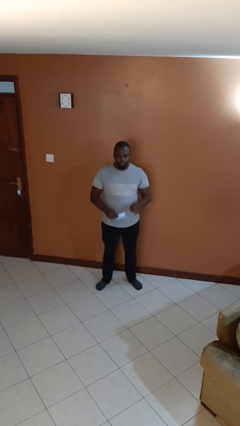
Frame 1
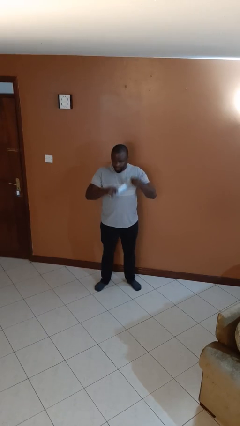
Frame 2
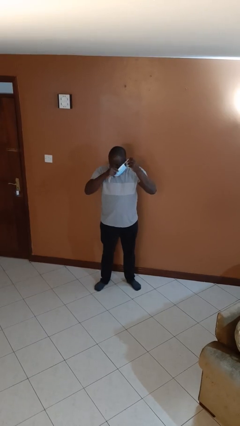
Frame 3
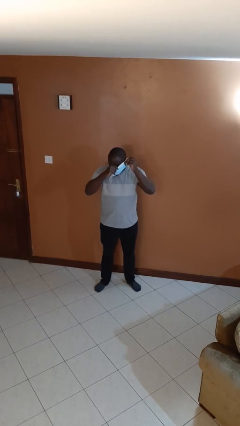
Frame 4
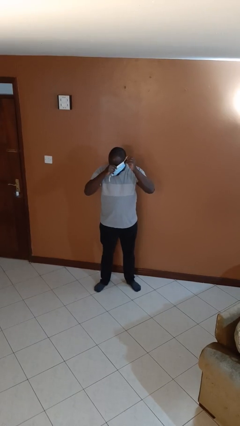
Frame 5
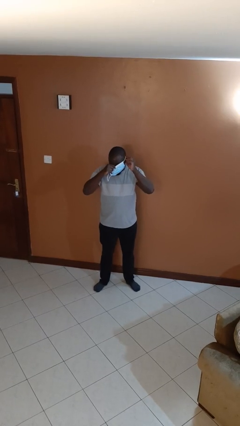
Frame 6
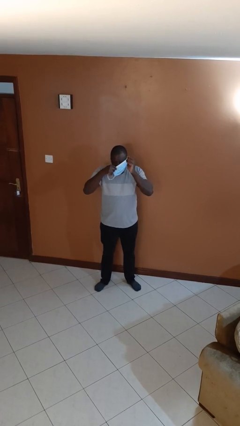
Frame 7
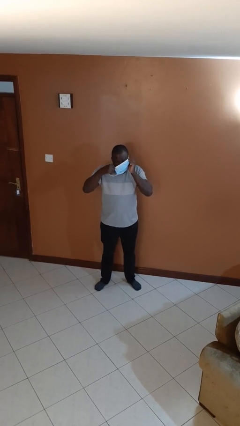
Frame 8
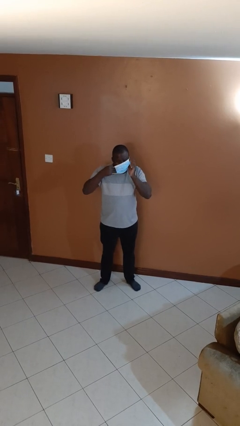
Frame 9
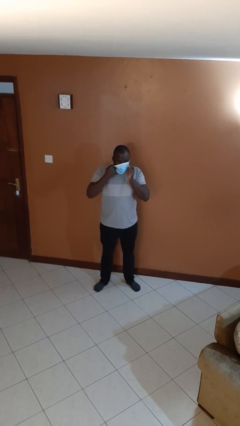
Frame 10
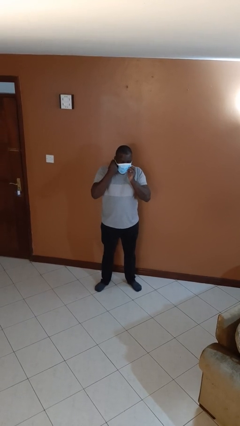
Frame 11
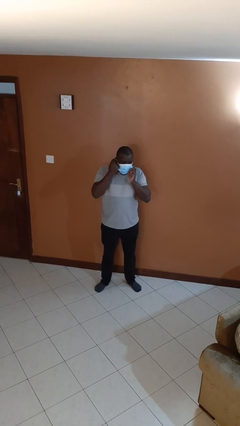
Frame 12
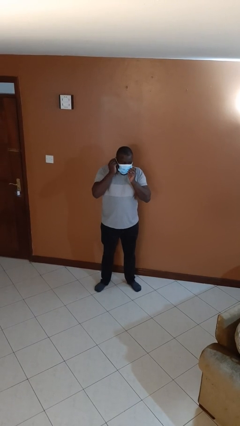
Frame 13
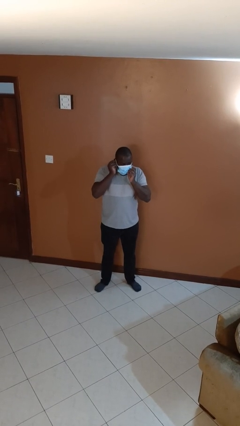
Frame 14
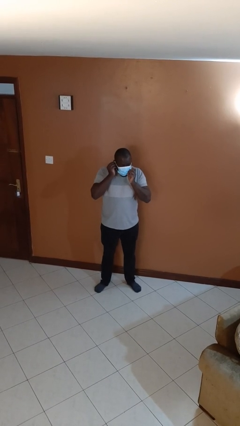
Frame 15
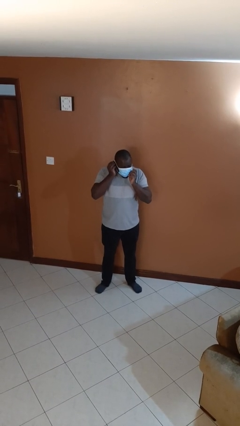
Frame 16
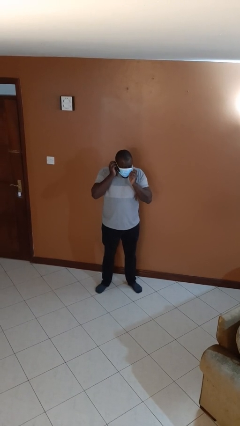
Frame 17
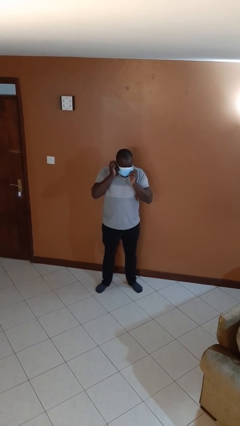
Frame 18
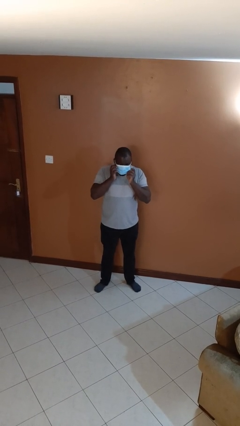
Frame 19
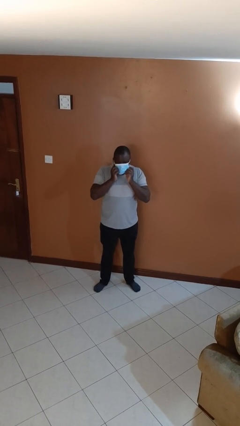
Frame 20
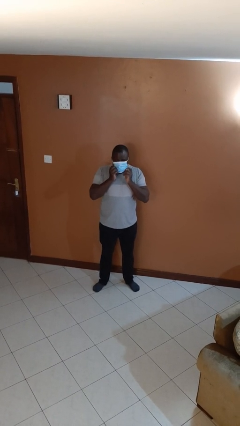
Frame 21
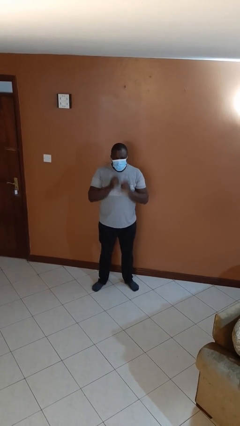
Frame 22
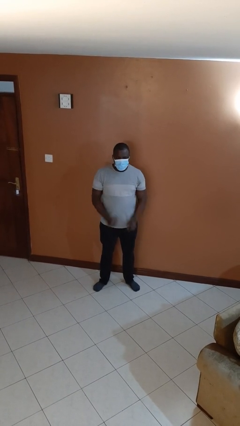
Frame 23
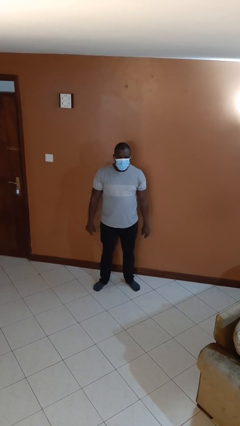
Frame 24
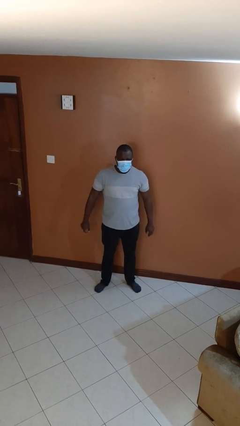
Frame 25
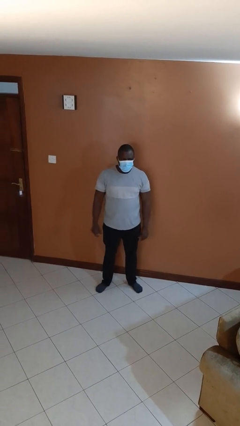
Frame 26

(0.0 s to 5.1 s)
person puts on facemask

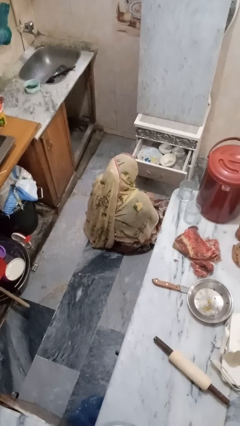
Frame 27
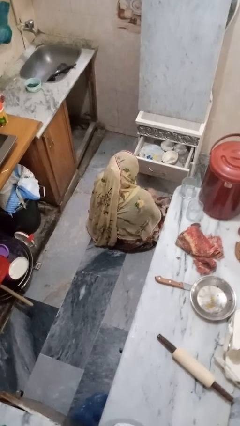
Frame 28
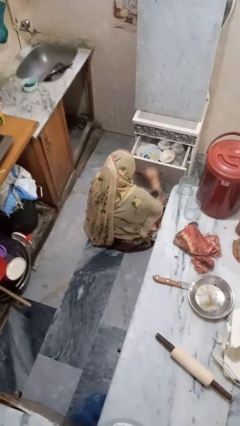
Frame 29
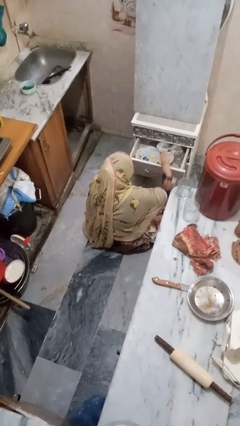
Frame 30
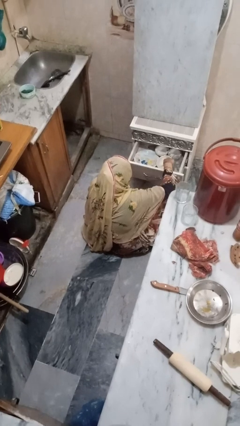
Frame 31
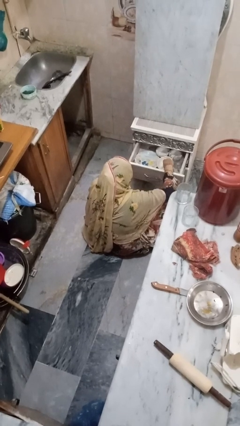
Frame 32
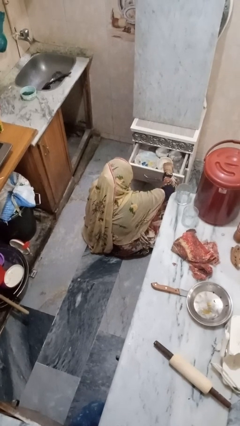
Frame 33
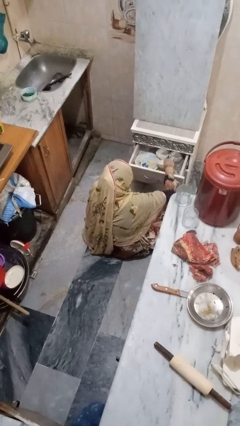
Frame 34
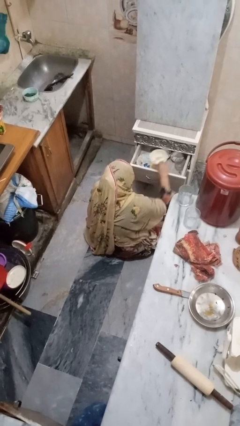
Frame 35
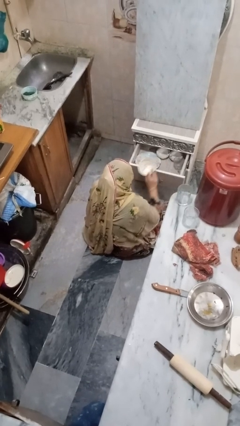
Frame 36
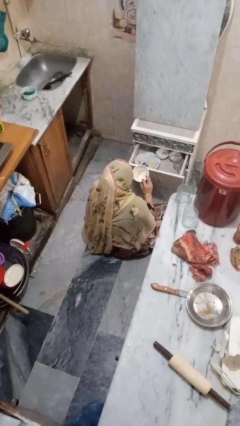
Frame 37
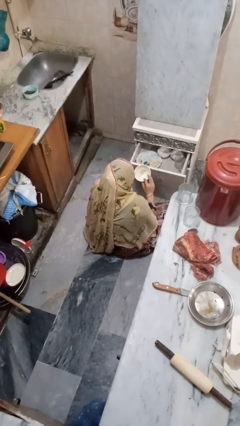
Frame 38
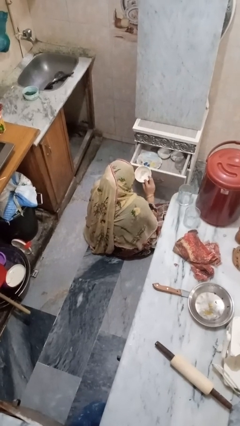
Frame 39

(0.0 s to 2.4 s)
person takes object from kitchen drawer

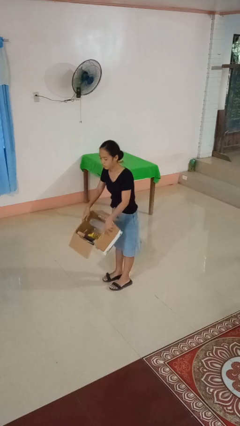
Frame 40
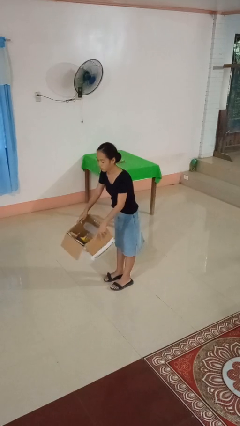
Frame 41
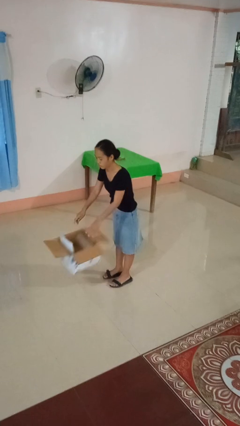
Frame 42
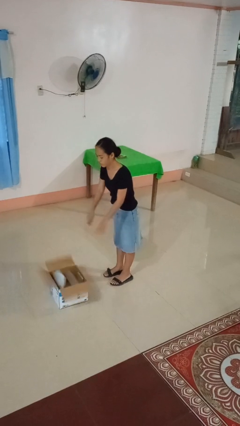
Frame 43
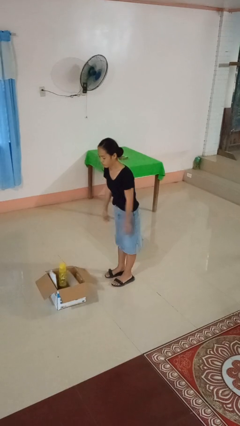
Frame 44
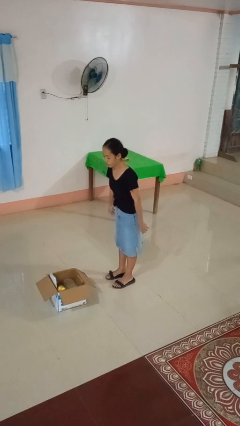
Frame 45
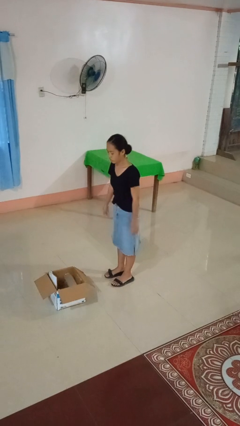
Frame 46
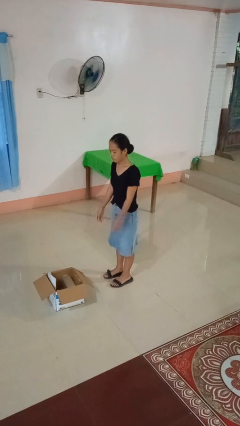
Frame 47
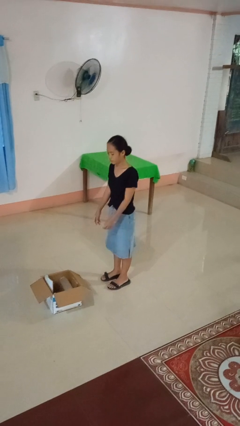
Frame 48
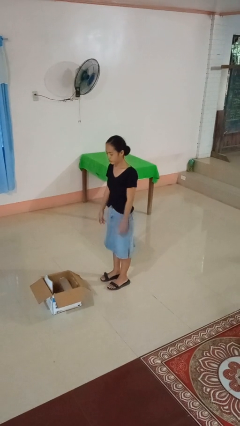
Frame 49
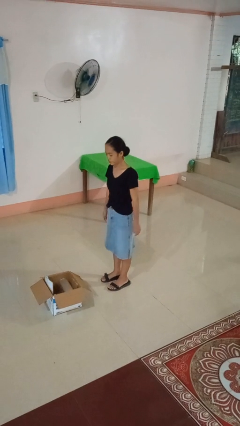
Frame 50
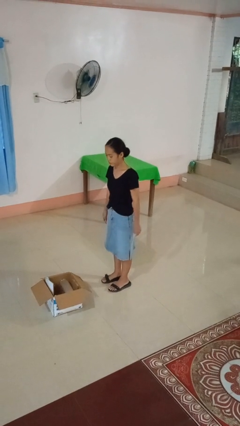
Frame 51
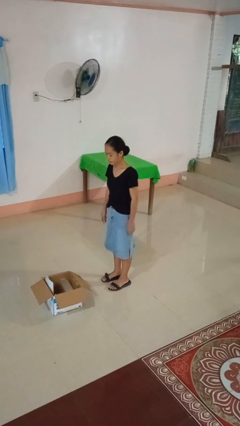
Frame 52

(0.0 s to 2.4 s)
person unloads box onto floor

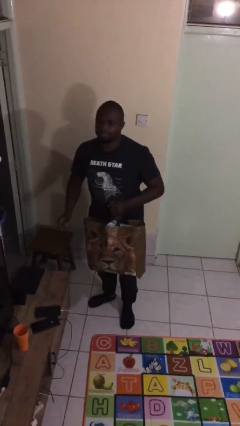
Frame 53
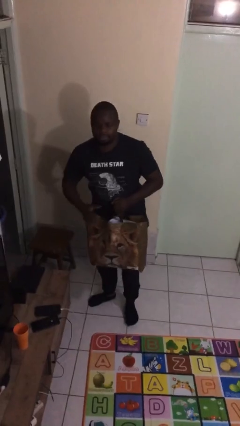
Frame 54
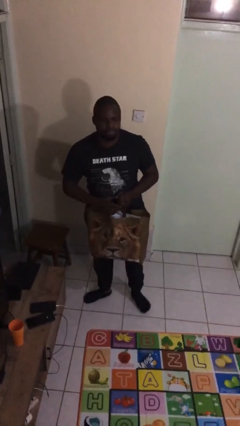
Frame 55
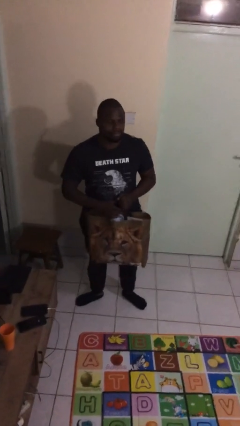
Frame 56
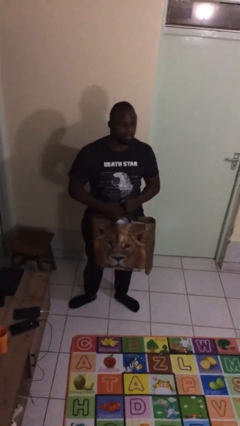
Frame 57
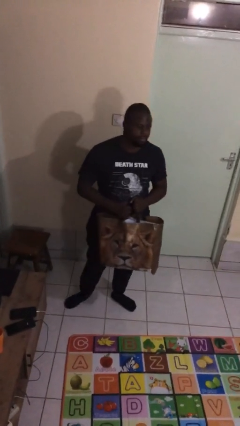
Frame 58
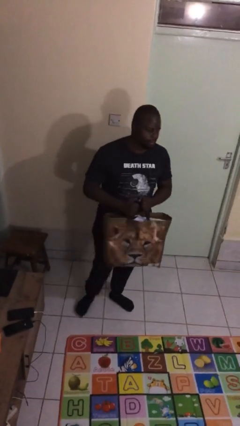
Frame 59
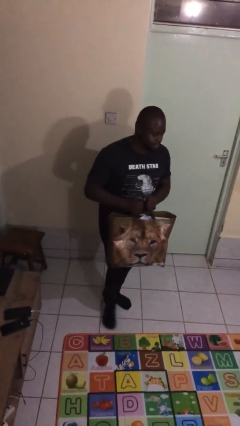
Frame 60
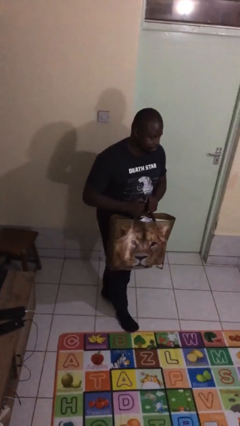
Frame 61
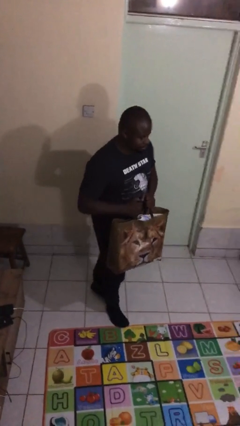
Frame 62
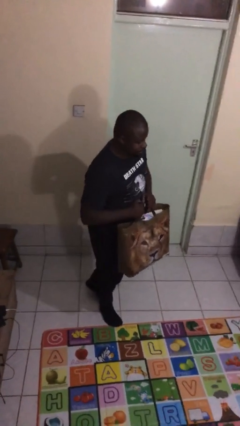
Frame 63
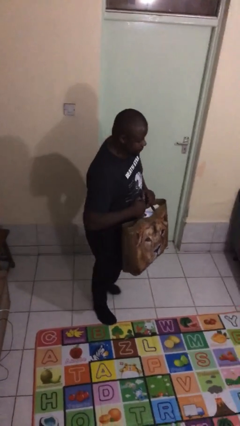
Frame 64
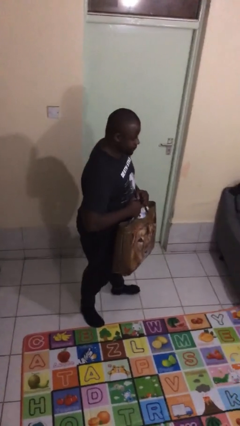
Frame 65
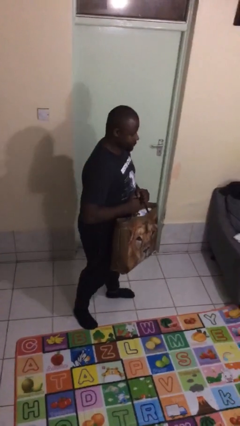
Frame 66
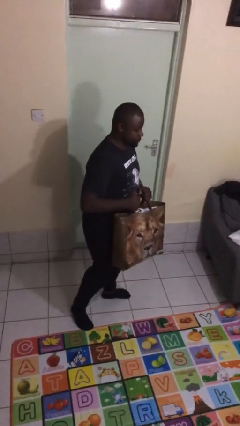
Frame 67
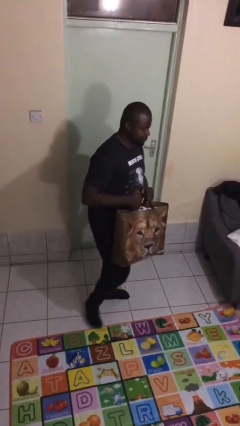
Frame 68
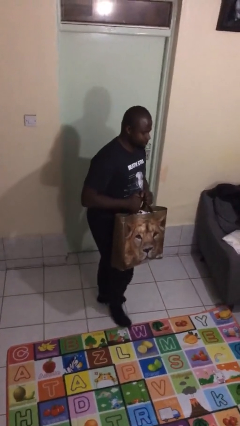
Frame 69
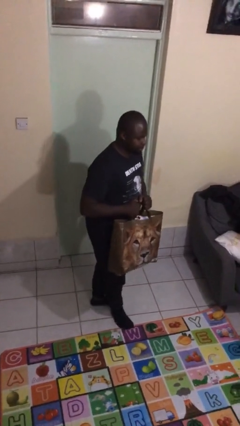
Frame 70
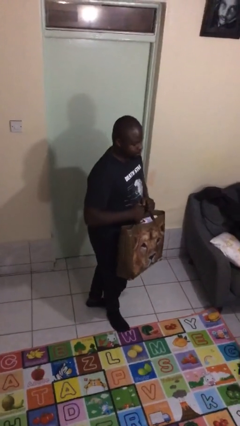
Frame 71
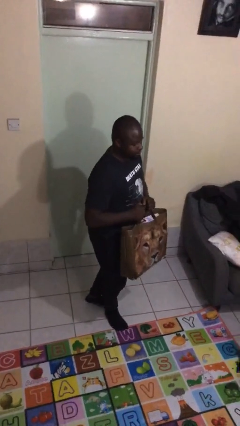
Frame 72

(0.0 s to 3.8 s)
person carries groceries

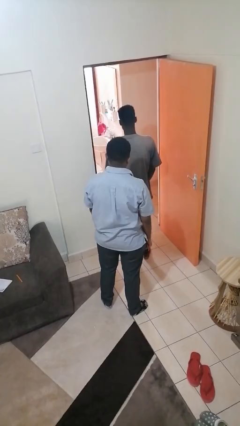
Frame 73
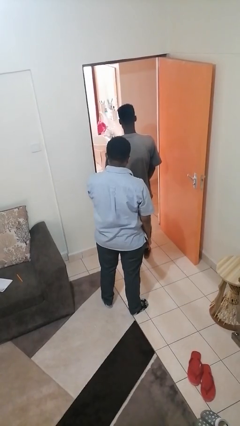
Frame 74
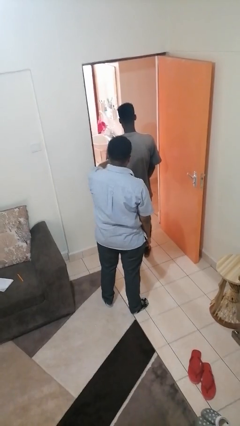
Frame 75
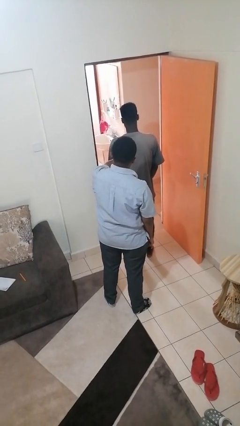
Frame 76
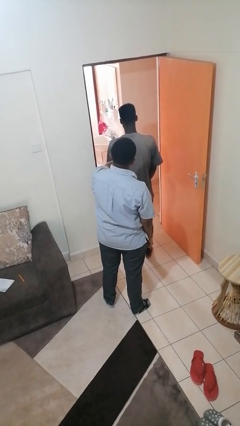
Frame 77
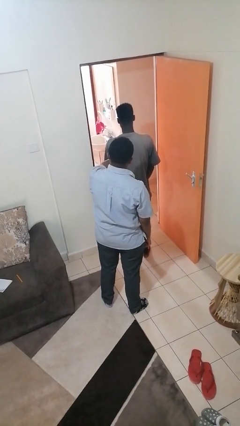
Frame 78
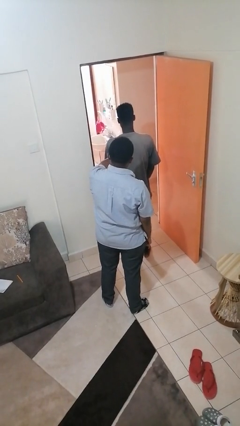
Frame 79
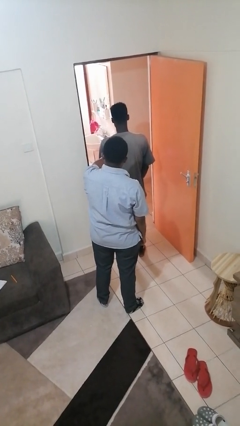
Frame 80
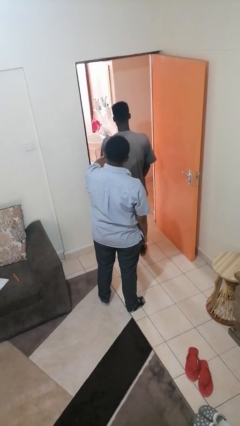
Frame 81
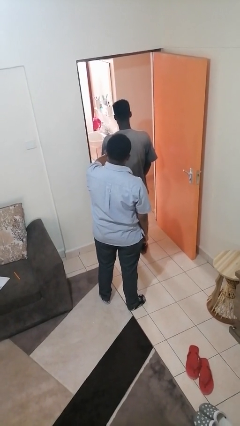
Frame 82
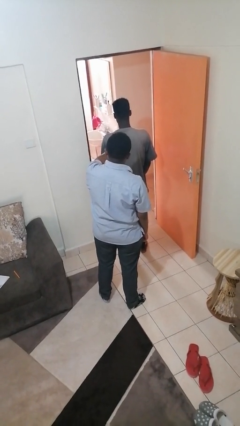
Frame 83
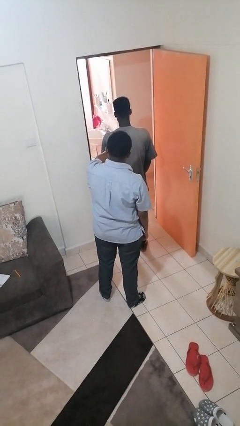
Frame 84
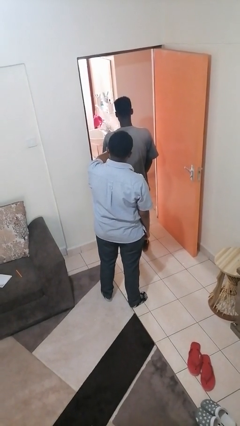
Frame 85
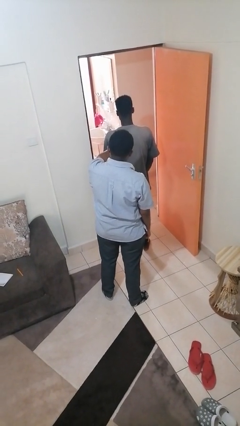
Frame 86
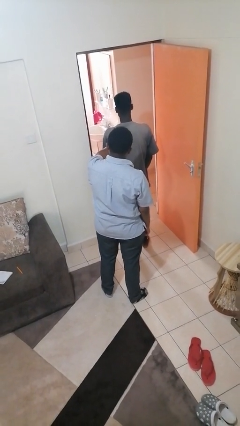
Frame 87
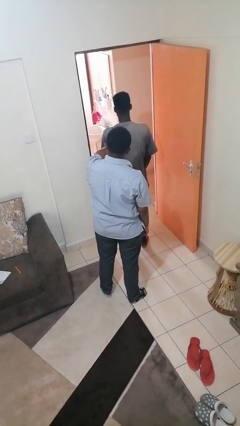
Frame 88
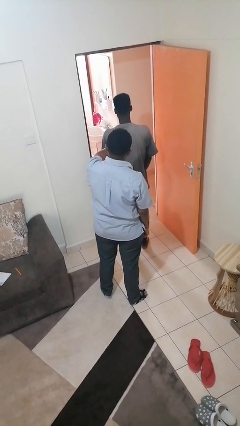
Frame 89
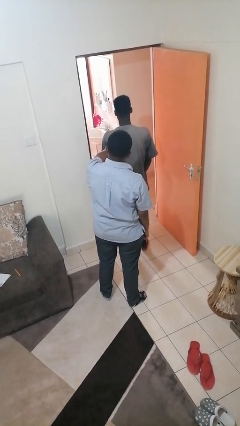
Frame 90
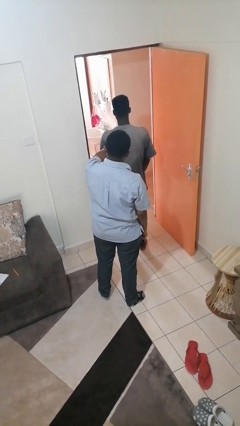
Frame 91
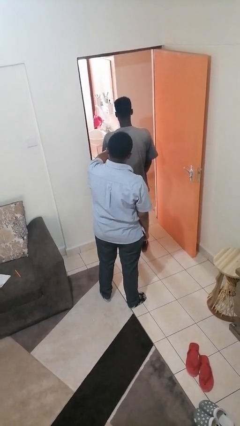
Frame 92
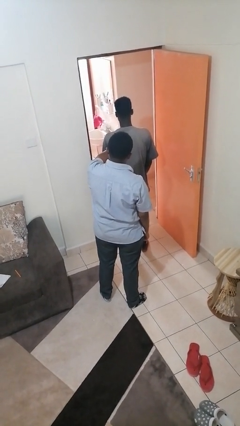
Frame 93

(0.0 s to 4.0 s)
person touches back of person

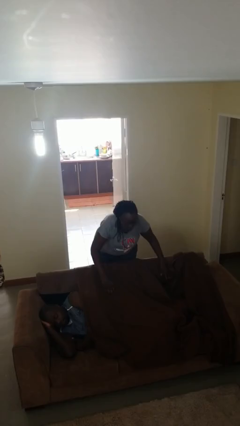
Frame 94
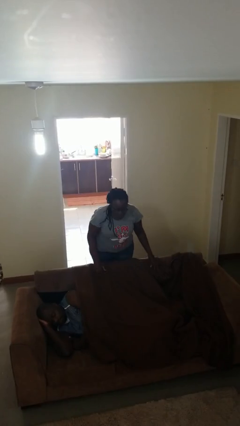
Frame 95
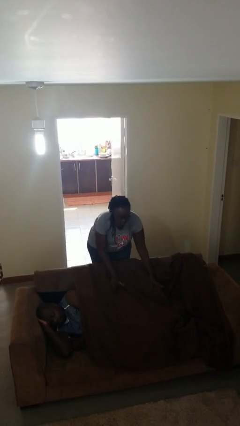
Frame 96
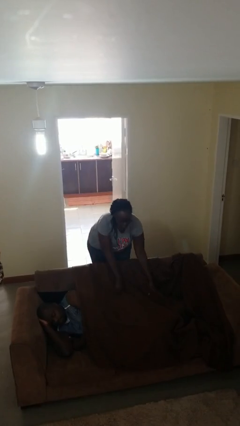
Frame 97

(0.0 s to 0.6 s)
person uncovers friend with blanket
